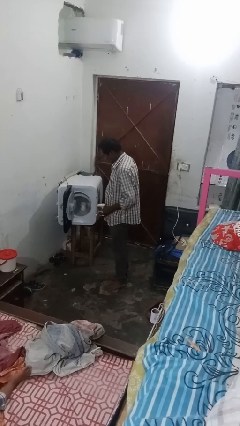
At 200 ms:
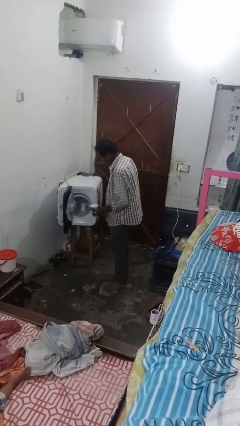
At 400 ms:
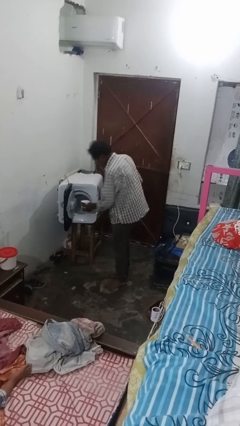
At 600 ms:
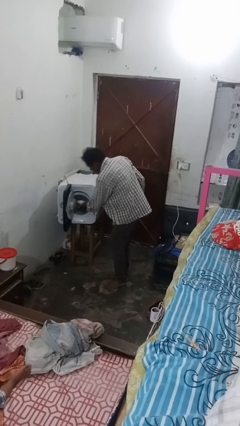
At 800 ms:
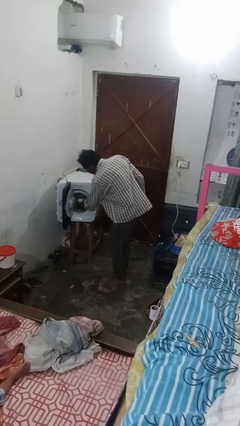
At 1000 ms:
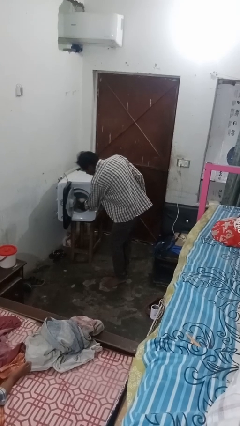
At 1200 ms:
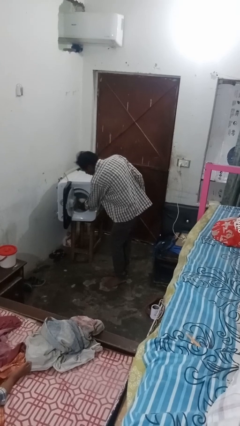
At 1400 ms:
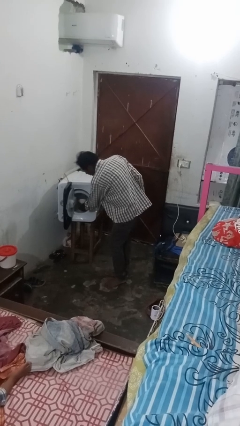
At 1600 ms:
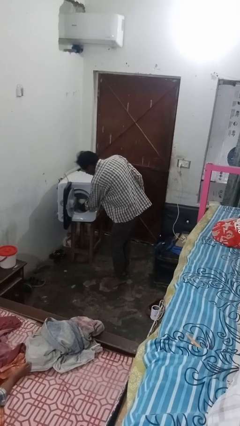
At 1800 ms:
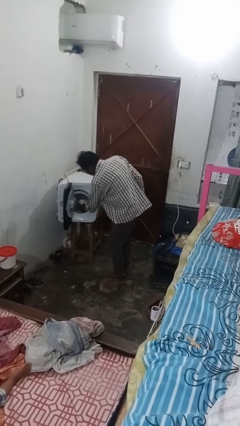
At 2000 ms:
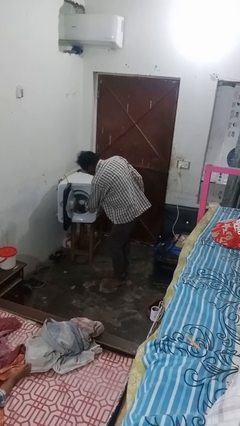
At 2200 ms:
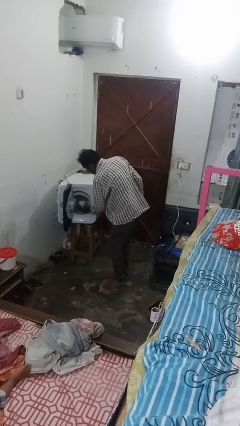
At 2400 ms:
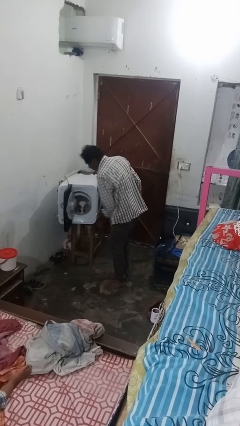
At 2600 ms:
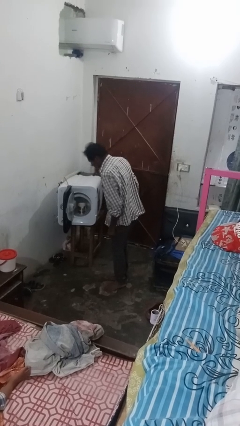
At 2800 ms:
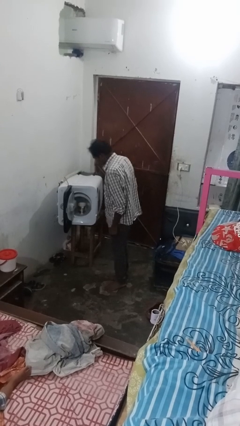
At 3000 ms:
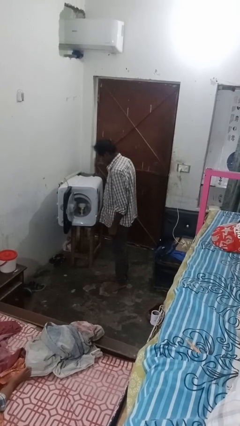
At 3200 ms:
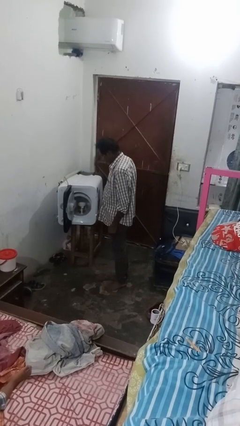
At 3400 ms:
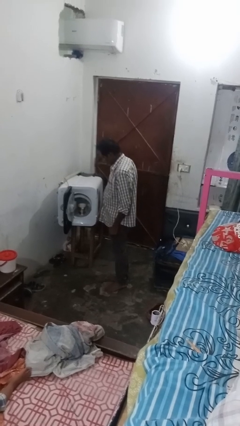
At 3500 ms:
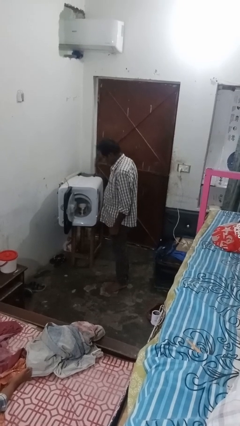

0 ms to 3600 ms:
person loads dishwasher

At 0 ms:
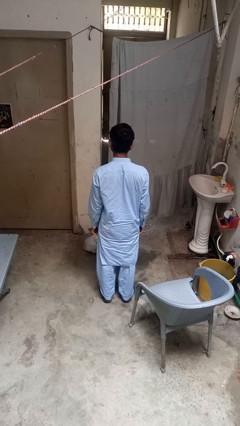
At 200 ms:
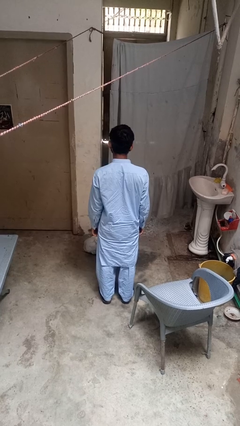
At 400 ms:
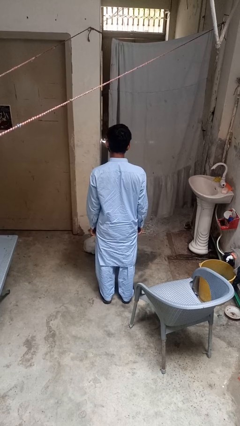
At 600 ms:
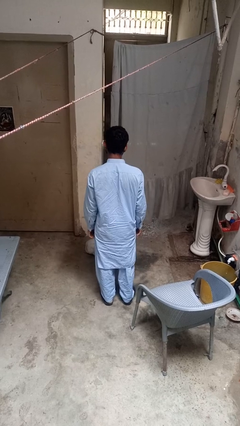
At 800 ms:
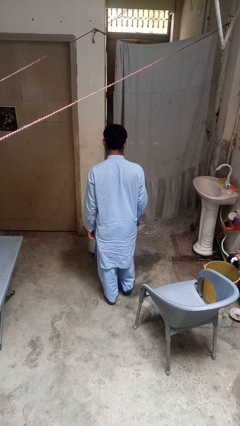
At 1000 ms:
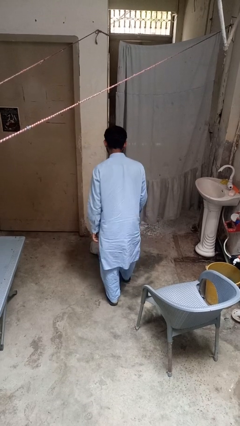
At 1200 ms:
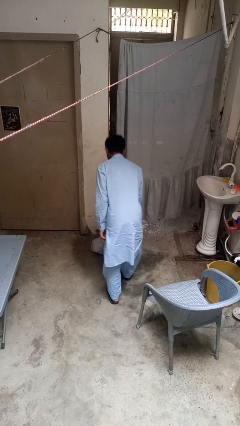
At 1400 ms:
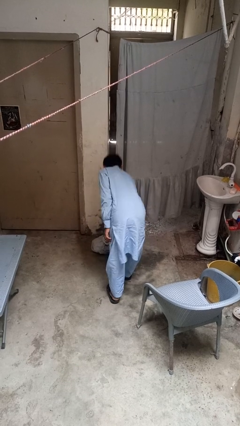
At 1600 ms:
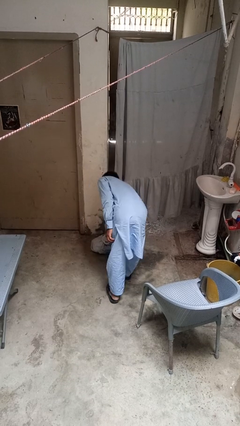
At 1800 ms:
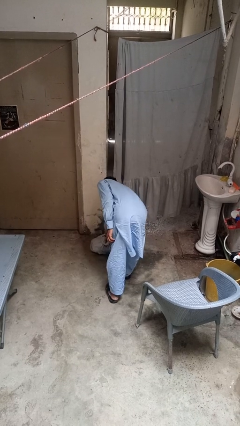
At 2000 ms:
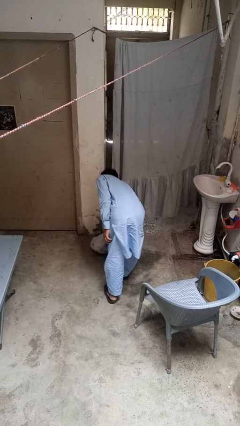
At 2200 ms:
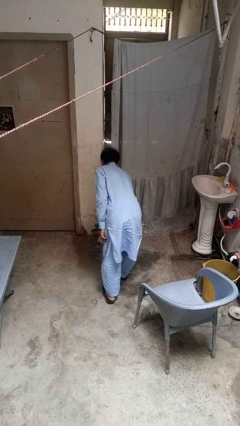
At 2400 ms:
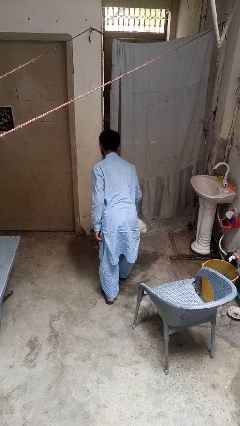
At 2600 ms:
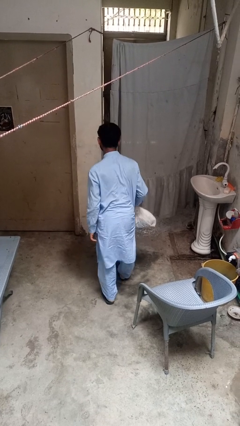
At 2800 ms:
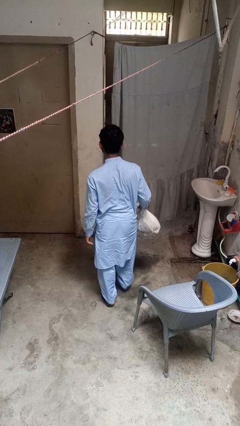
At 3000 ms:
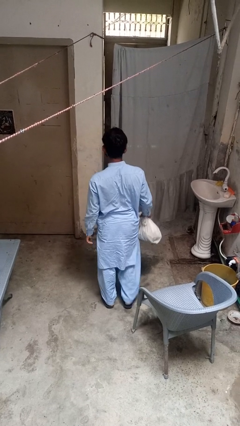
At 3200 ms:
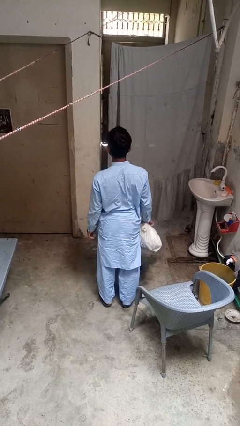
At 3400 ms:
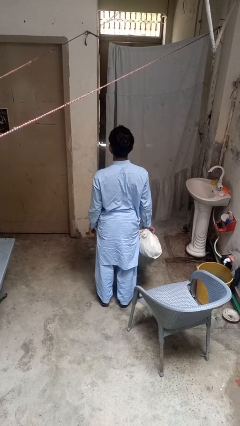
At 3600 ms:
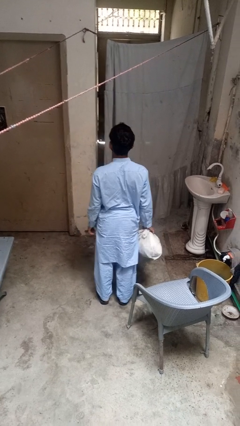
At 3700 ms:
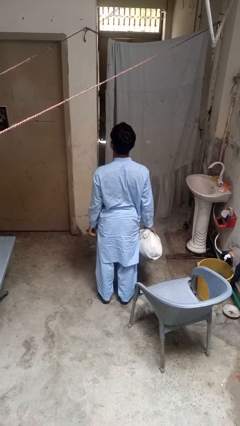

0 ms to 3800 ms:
person picks up object from floor

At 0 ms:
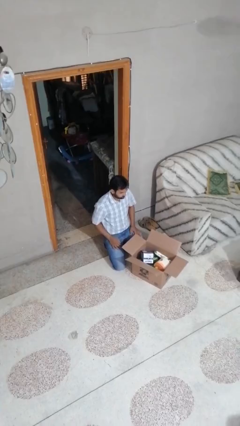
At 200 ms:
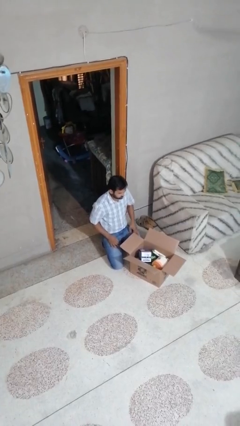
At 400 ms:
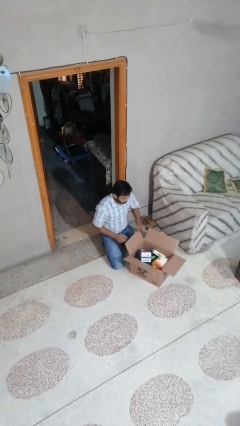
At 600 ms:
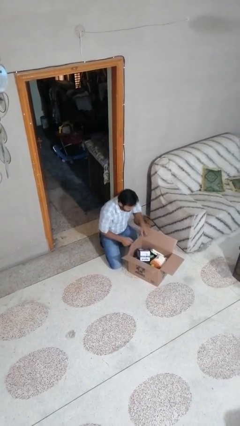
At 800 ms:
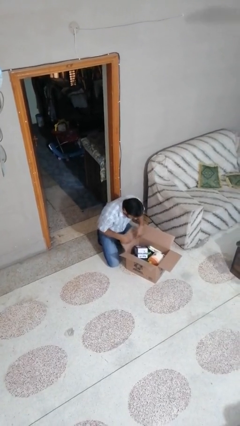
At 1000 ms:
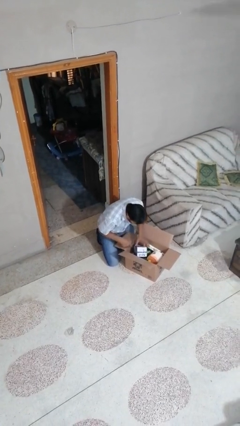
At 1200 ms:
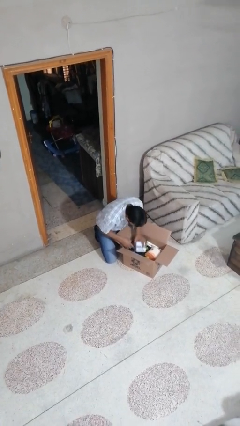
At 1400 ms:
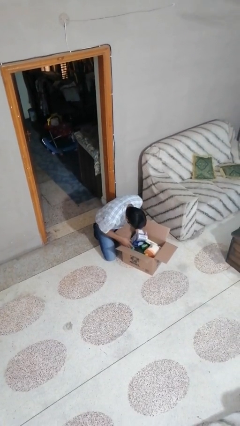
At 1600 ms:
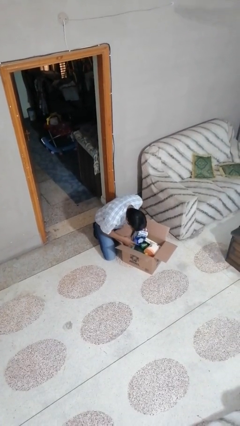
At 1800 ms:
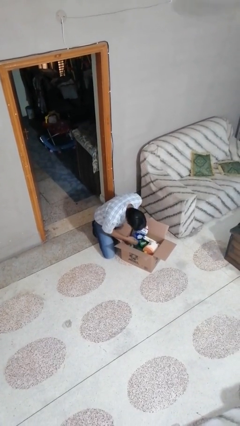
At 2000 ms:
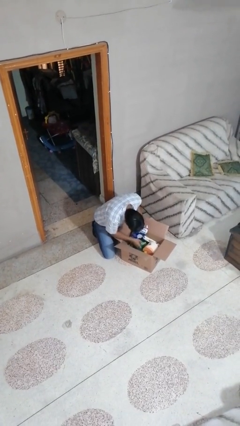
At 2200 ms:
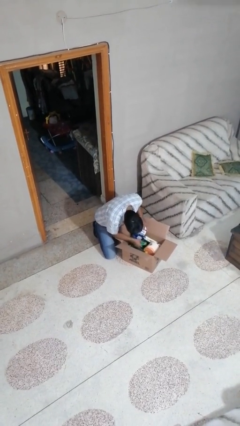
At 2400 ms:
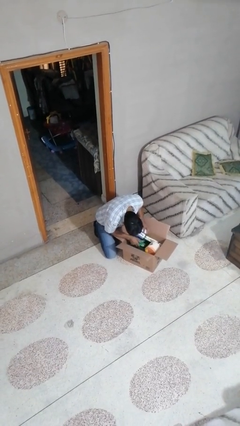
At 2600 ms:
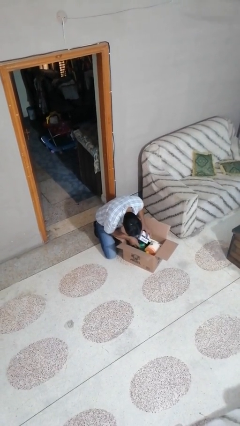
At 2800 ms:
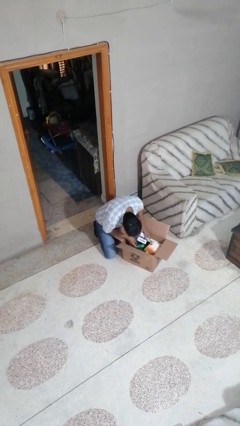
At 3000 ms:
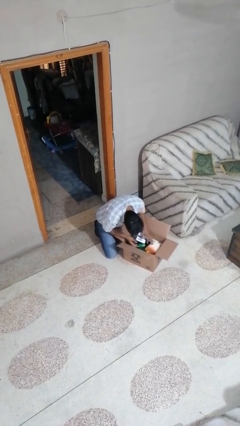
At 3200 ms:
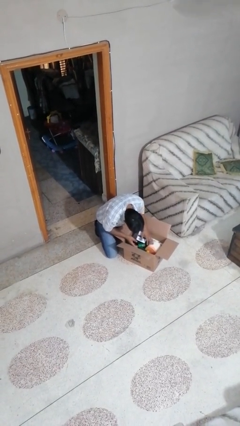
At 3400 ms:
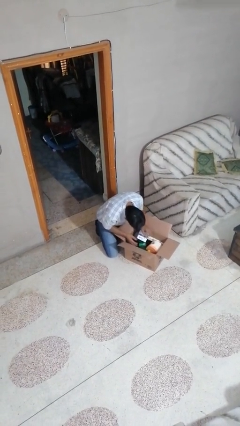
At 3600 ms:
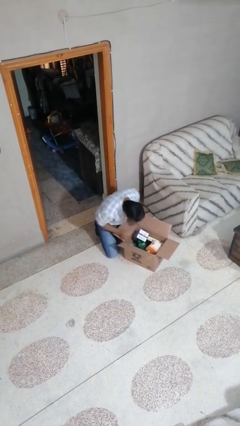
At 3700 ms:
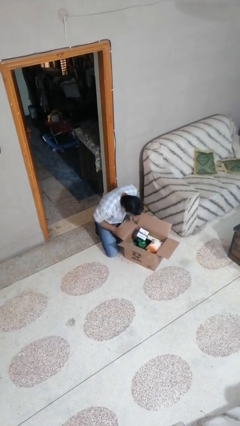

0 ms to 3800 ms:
person searches in box

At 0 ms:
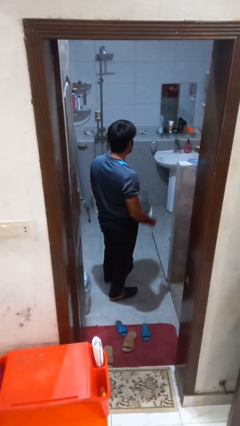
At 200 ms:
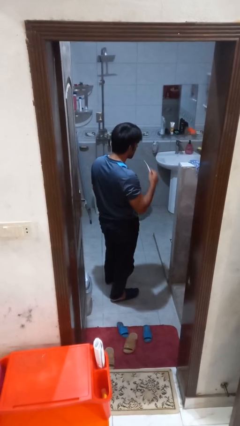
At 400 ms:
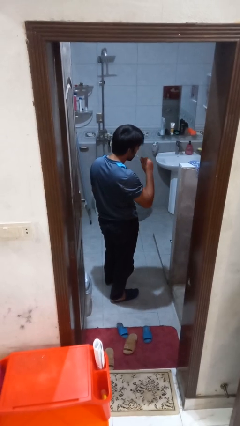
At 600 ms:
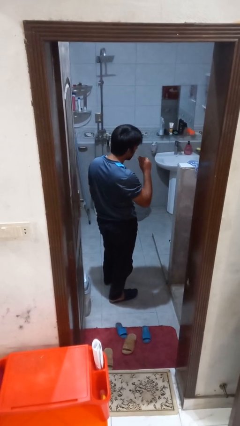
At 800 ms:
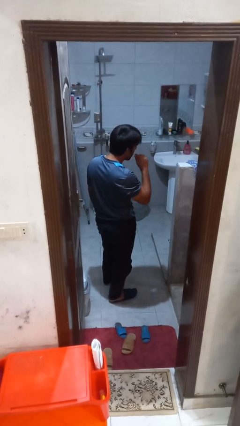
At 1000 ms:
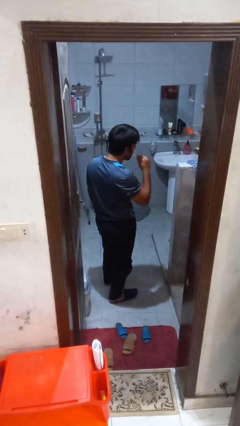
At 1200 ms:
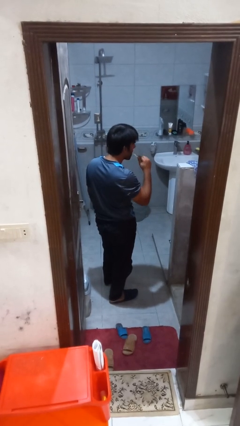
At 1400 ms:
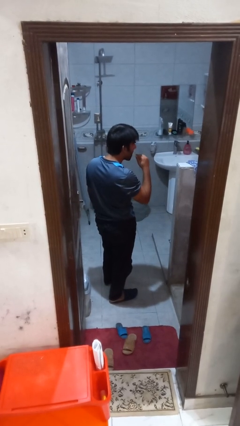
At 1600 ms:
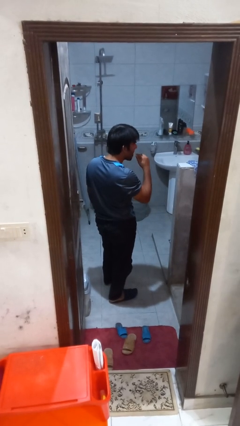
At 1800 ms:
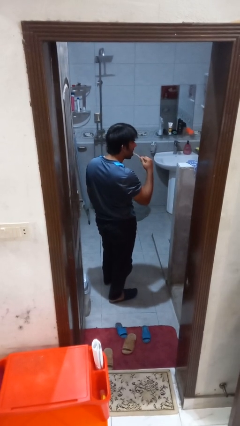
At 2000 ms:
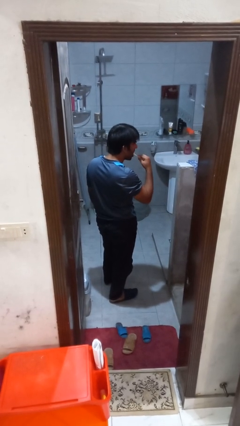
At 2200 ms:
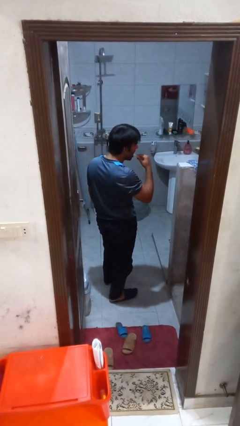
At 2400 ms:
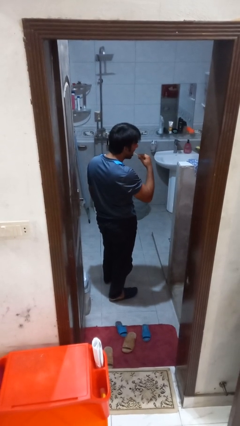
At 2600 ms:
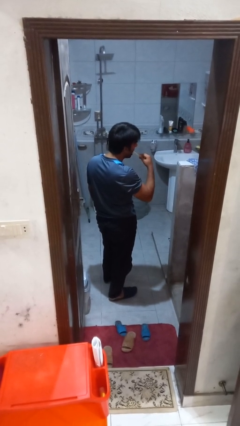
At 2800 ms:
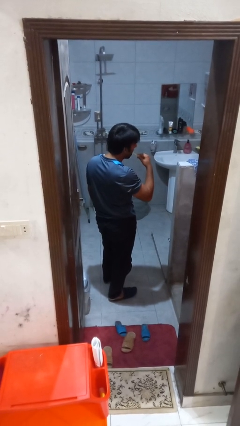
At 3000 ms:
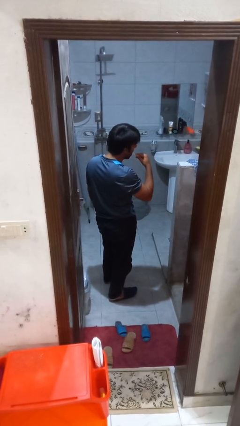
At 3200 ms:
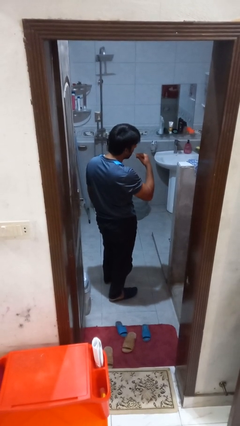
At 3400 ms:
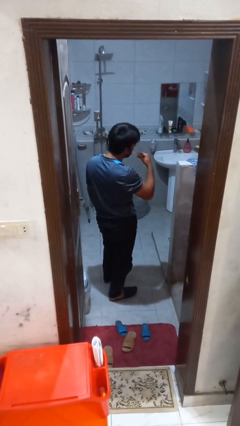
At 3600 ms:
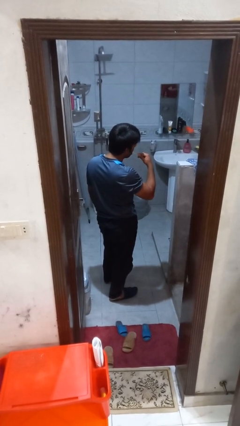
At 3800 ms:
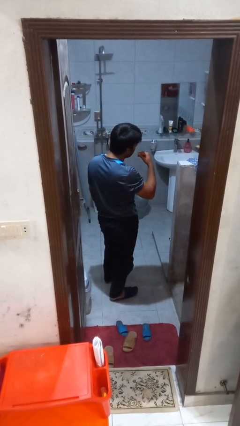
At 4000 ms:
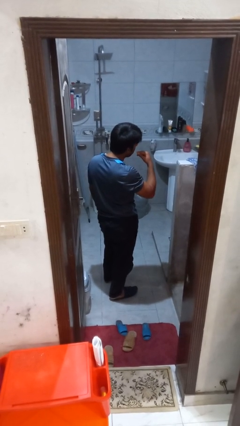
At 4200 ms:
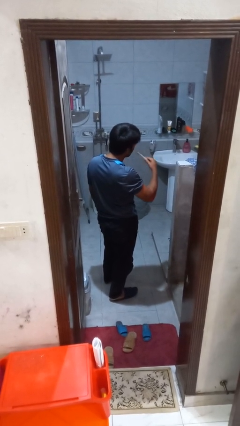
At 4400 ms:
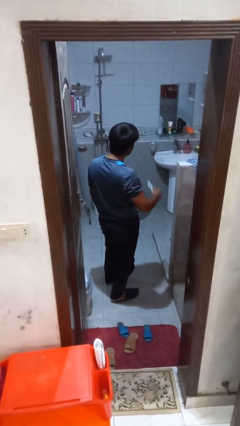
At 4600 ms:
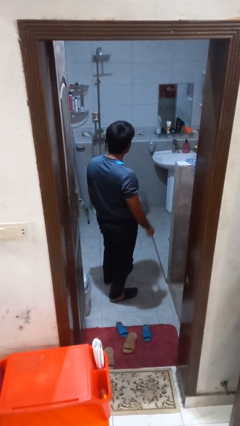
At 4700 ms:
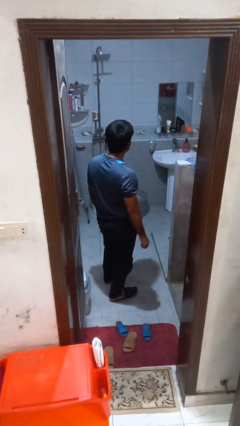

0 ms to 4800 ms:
person brushes teeth

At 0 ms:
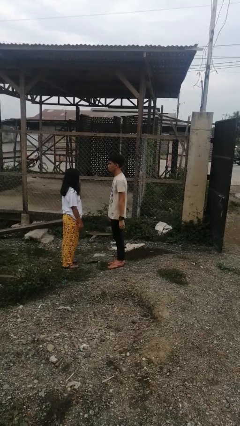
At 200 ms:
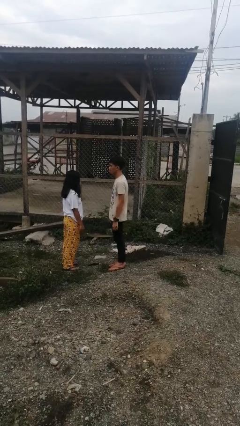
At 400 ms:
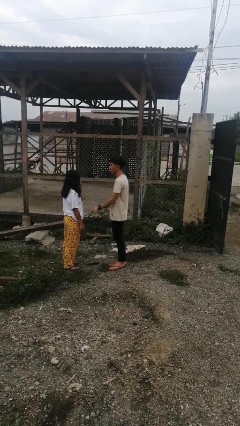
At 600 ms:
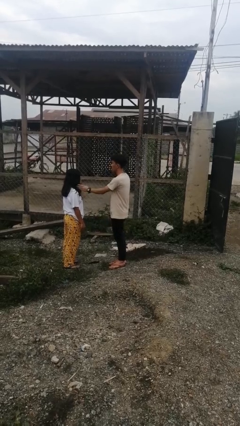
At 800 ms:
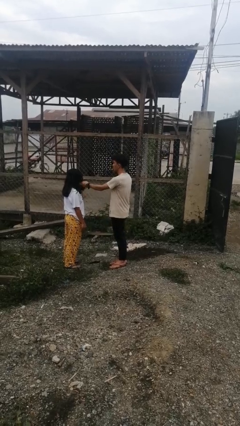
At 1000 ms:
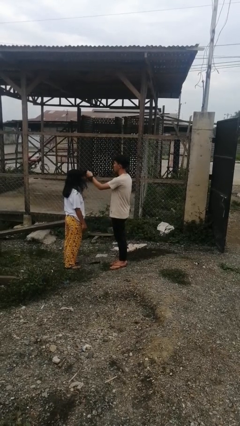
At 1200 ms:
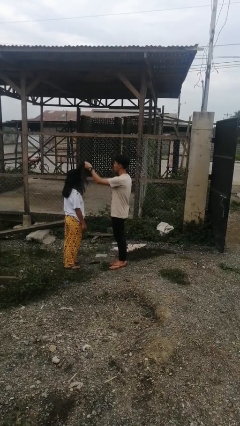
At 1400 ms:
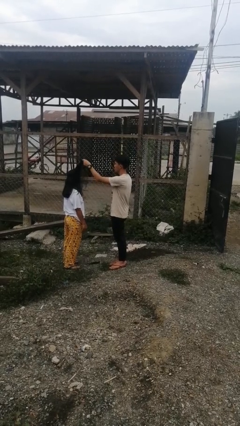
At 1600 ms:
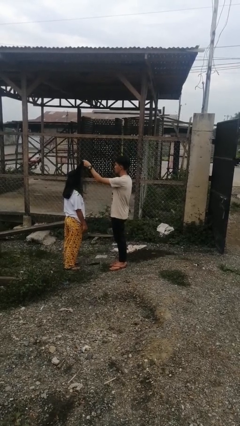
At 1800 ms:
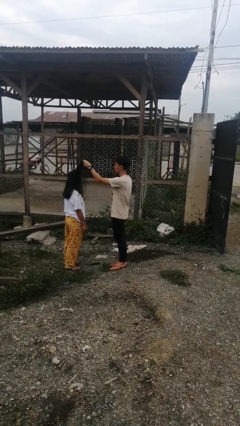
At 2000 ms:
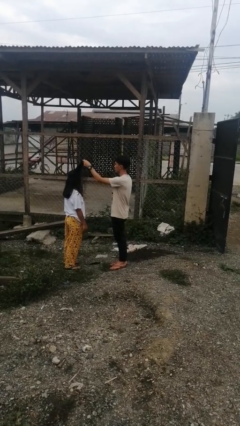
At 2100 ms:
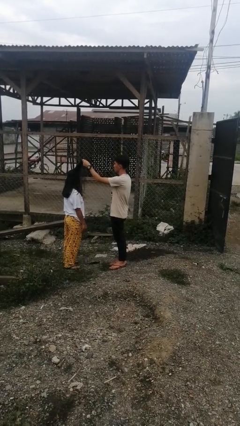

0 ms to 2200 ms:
person grabs person by hair
